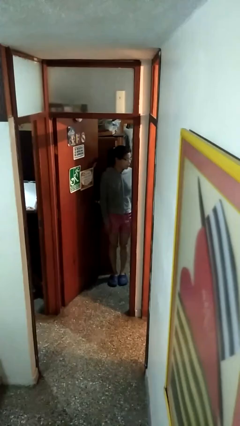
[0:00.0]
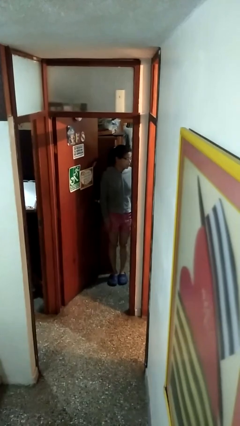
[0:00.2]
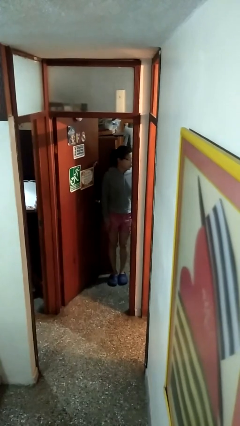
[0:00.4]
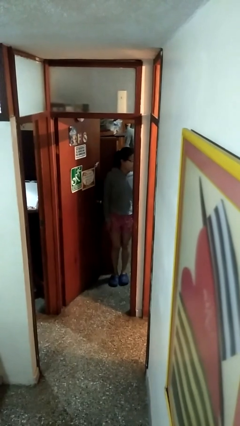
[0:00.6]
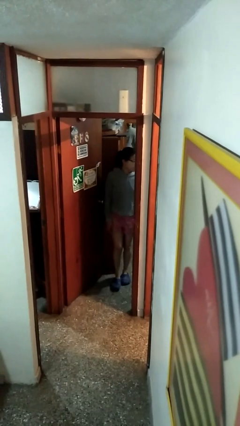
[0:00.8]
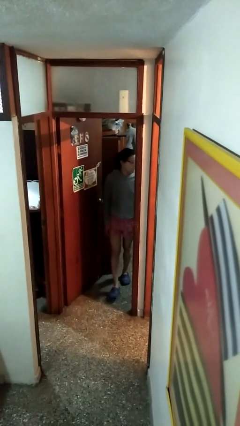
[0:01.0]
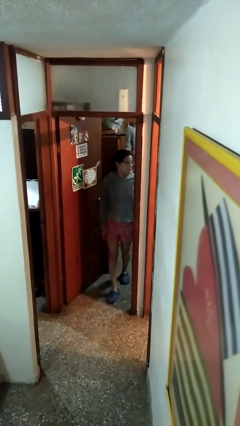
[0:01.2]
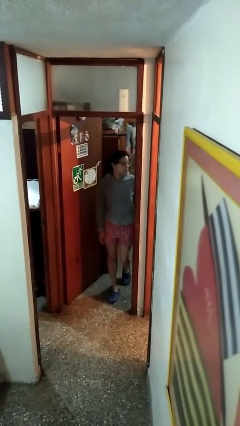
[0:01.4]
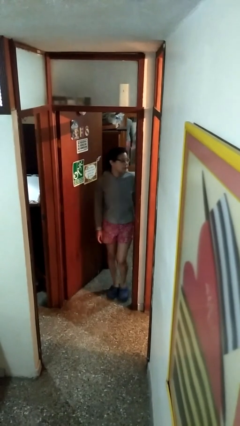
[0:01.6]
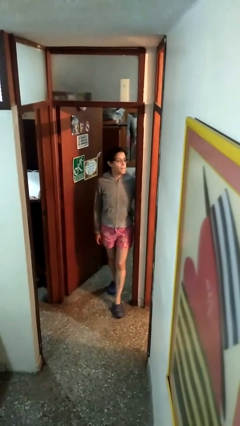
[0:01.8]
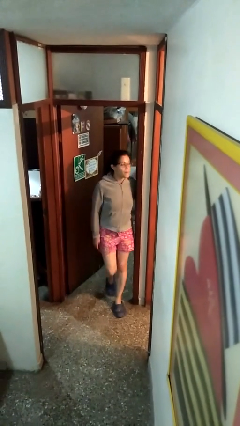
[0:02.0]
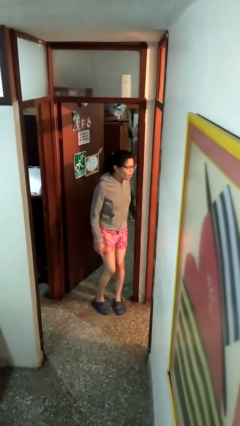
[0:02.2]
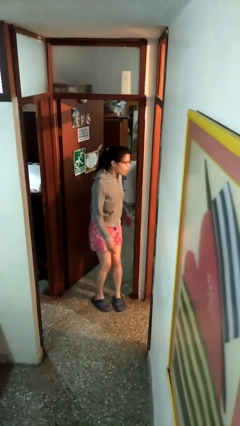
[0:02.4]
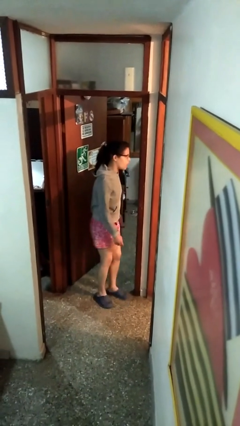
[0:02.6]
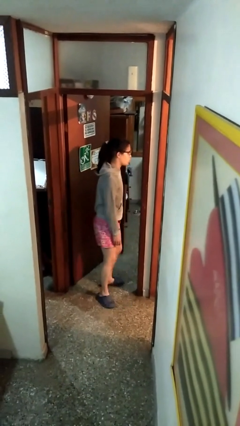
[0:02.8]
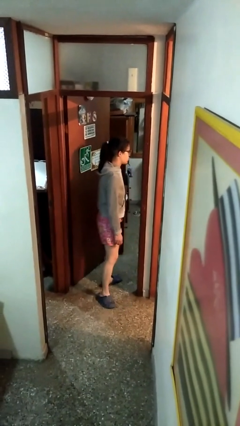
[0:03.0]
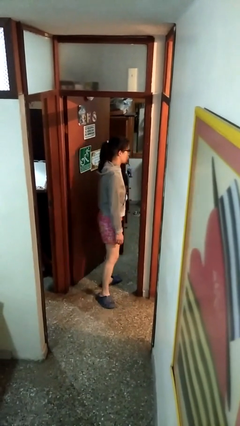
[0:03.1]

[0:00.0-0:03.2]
person bumps into wall

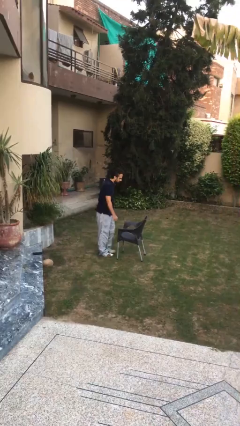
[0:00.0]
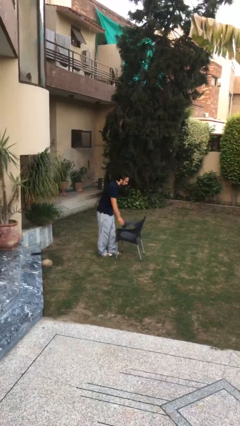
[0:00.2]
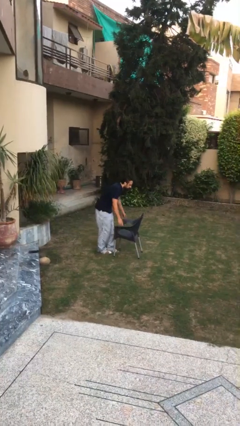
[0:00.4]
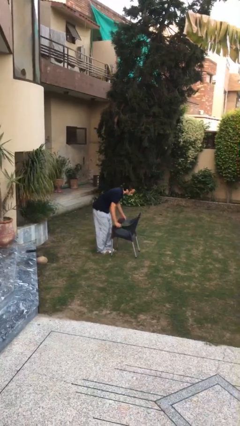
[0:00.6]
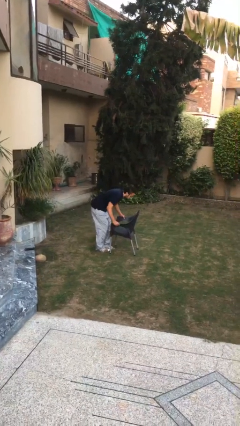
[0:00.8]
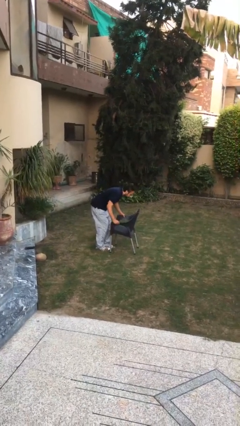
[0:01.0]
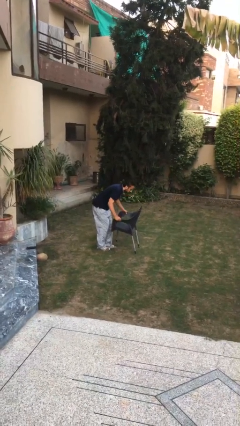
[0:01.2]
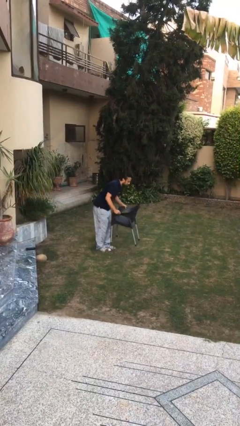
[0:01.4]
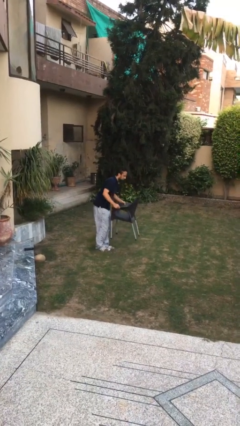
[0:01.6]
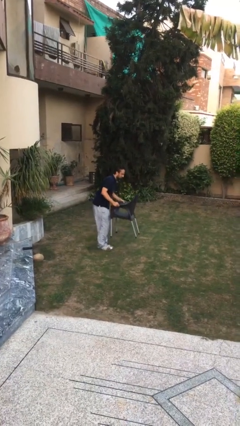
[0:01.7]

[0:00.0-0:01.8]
person picks up object from floor

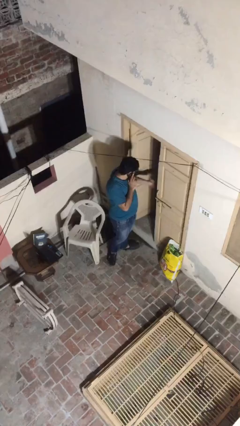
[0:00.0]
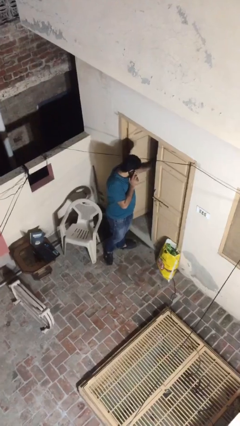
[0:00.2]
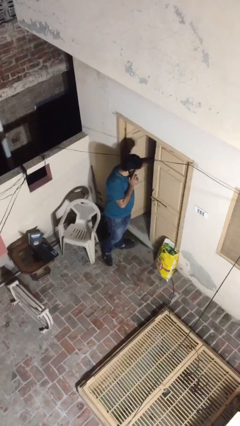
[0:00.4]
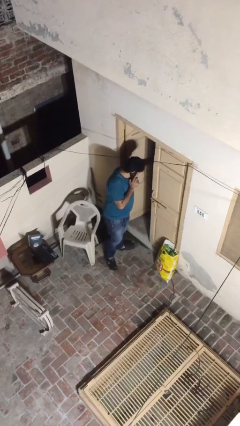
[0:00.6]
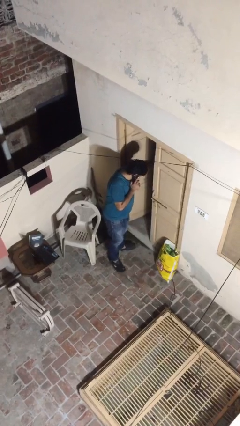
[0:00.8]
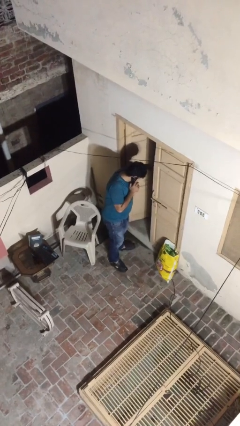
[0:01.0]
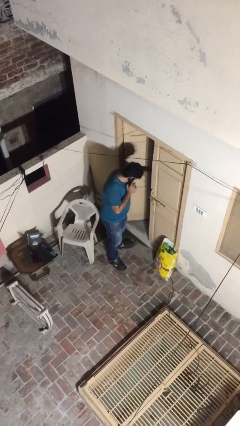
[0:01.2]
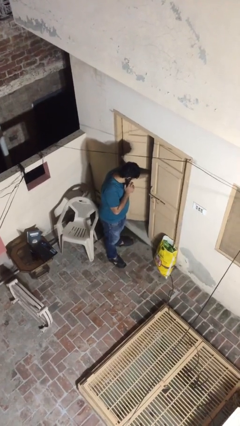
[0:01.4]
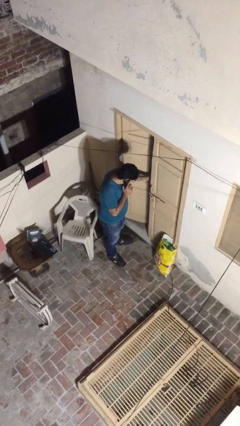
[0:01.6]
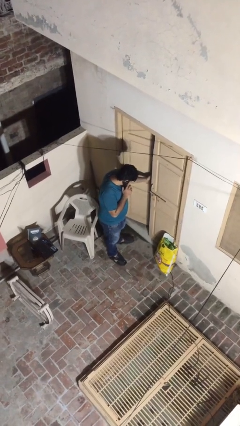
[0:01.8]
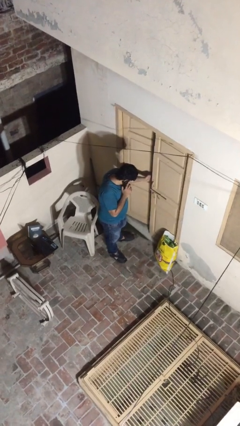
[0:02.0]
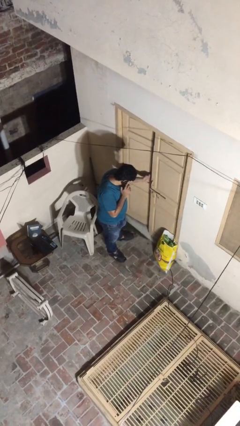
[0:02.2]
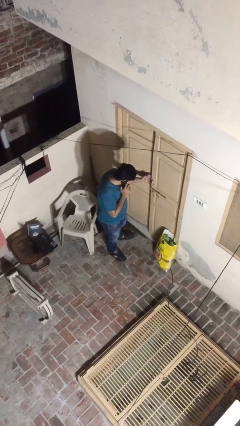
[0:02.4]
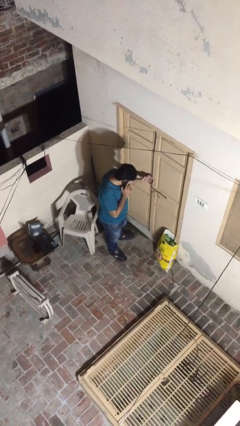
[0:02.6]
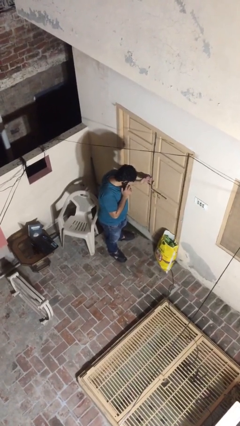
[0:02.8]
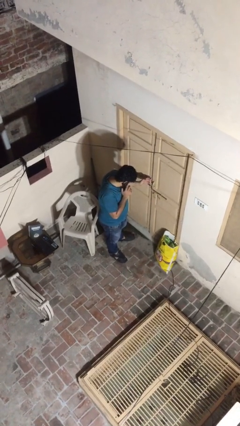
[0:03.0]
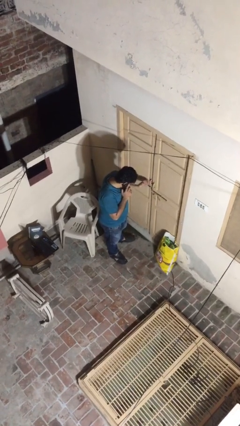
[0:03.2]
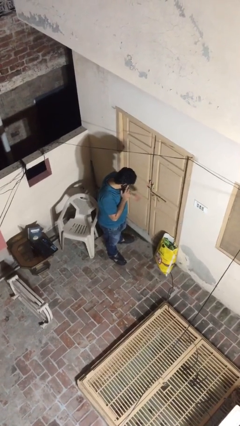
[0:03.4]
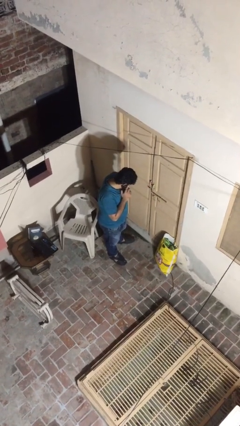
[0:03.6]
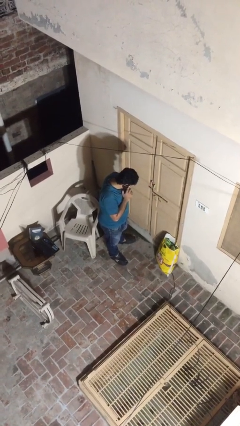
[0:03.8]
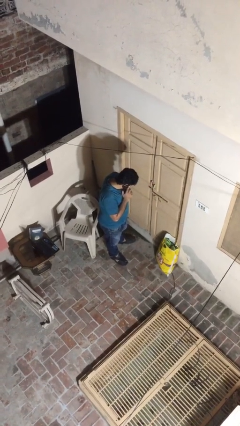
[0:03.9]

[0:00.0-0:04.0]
person closes facility door

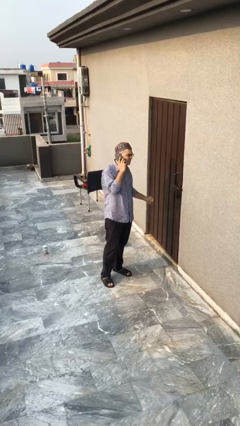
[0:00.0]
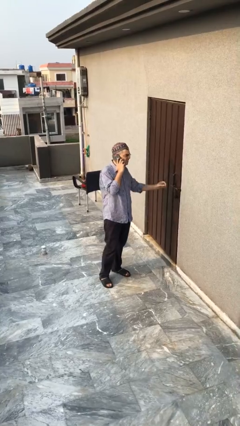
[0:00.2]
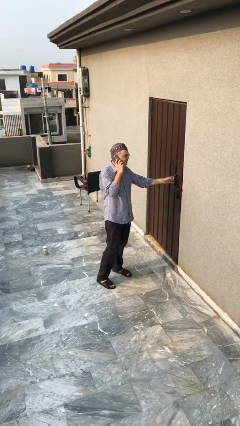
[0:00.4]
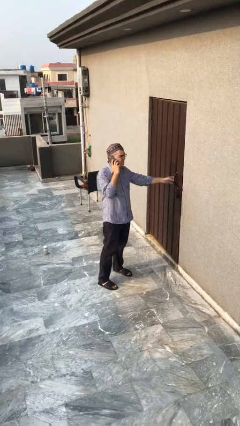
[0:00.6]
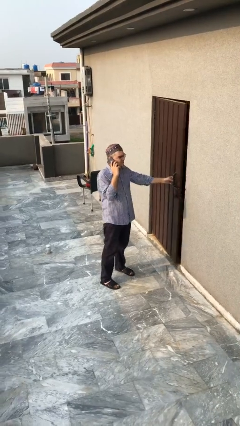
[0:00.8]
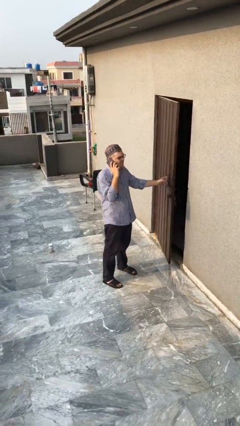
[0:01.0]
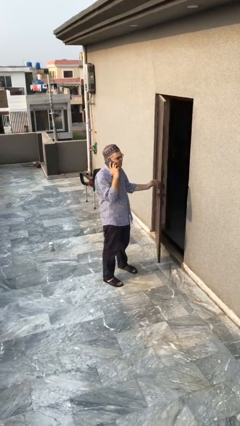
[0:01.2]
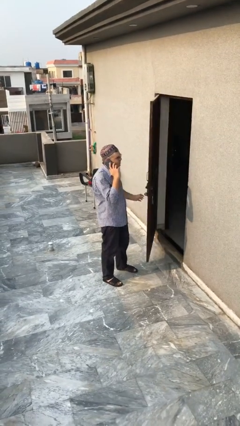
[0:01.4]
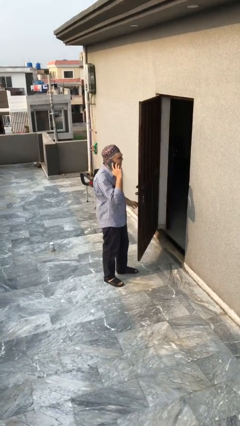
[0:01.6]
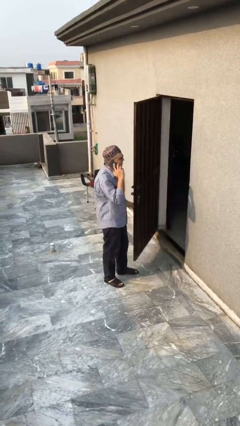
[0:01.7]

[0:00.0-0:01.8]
person opens facility door

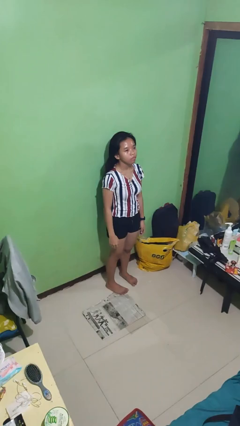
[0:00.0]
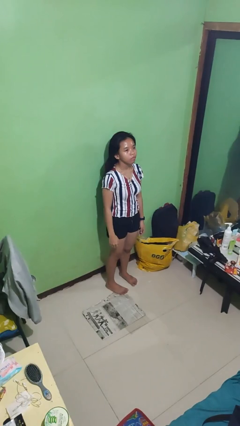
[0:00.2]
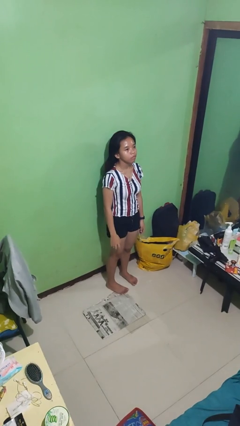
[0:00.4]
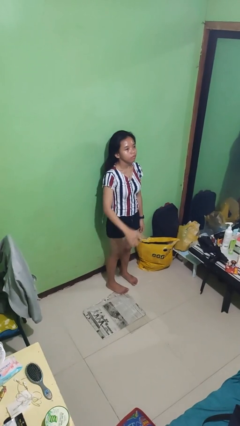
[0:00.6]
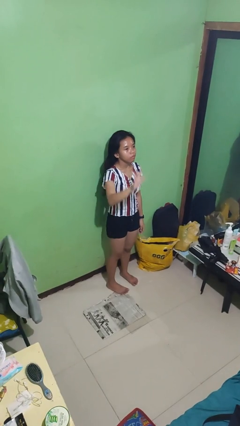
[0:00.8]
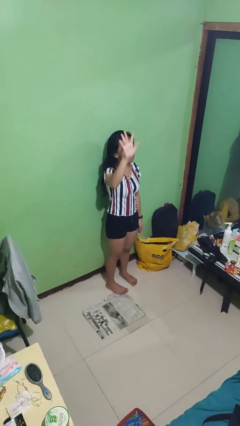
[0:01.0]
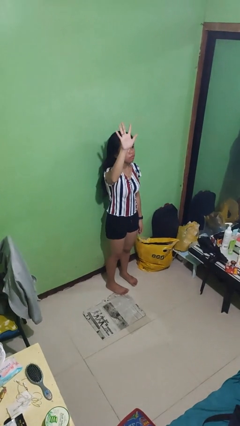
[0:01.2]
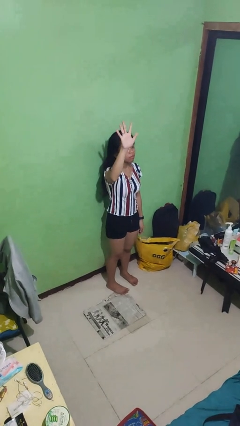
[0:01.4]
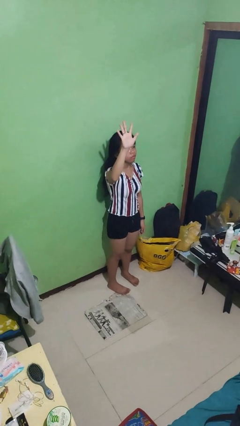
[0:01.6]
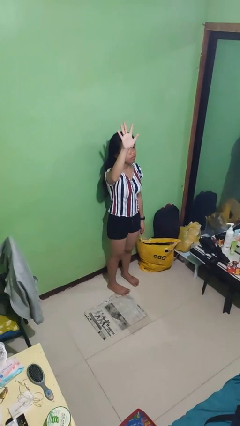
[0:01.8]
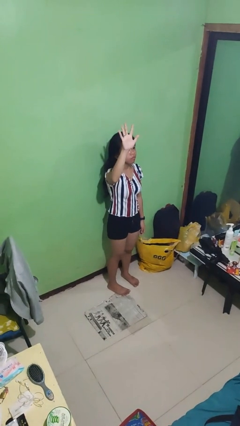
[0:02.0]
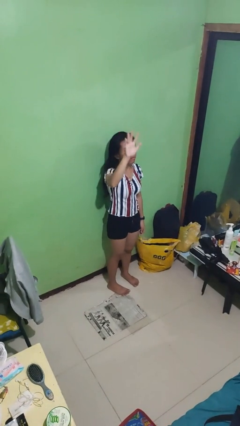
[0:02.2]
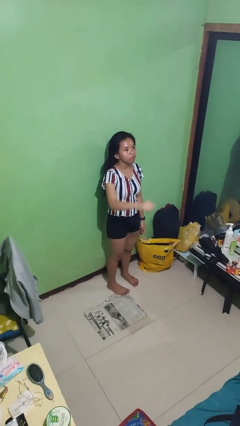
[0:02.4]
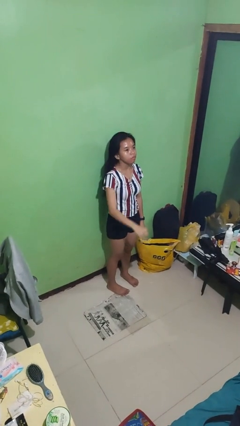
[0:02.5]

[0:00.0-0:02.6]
person gestures number five

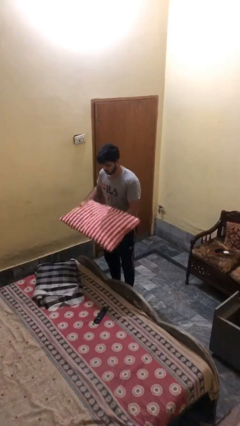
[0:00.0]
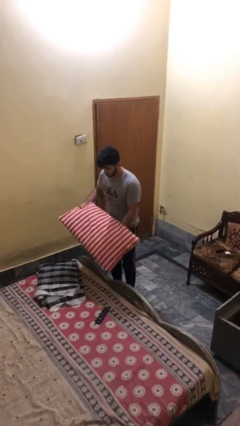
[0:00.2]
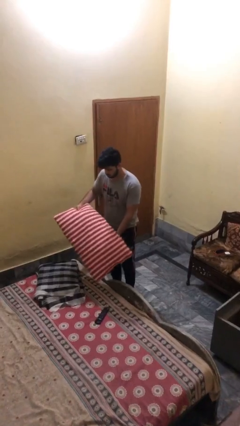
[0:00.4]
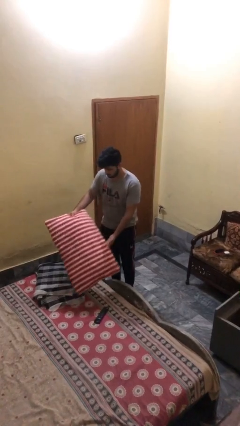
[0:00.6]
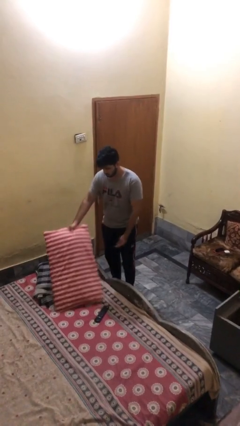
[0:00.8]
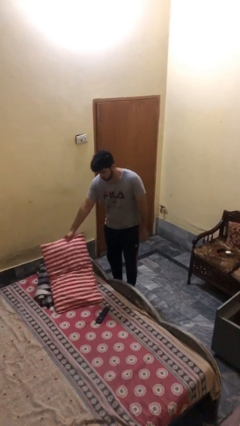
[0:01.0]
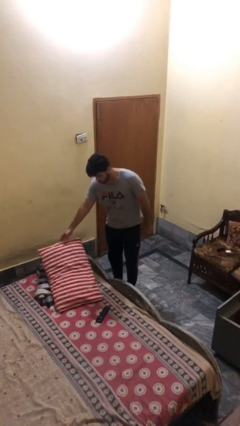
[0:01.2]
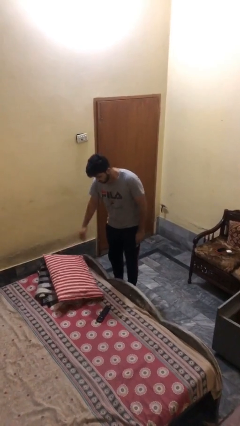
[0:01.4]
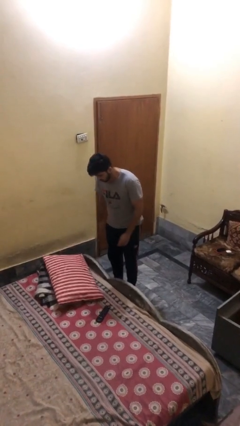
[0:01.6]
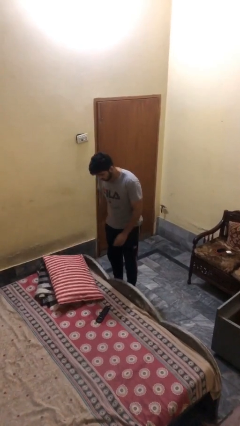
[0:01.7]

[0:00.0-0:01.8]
person puts down object on bed

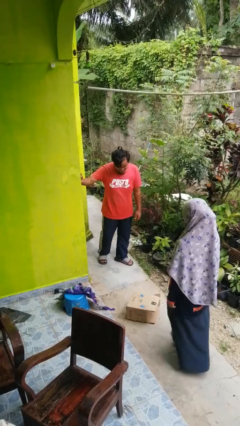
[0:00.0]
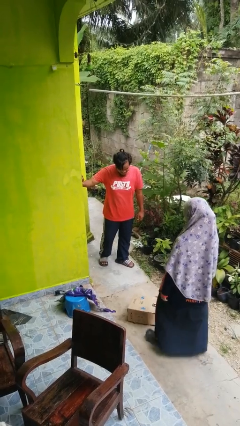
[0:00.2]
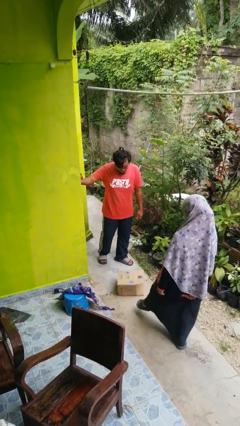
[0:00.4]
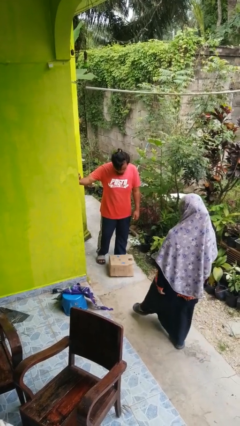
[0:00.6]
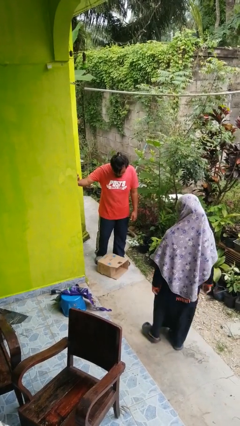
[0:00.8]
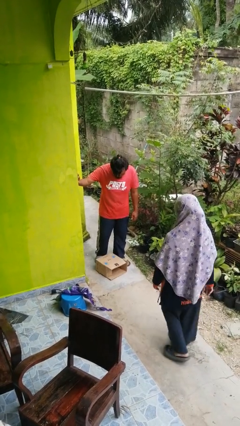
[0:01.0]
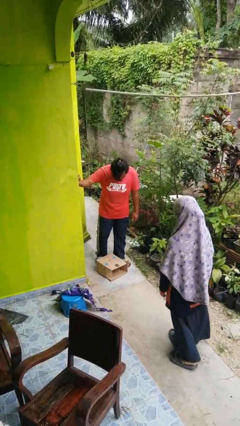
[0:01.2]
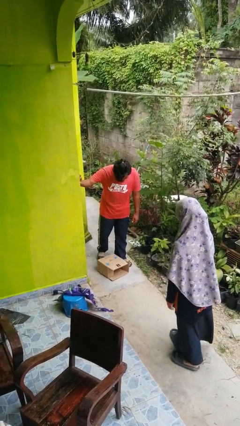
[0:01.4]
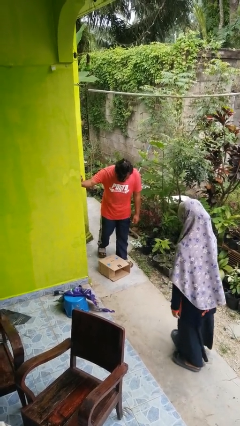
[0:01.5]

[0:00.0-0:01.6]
person kicks object to person
